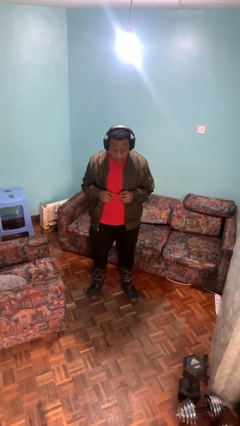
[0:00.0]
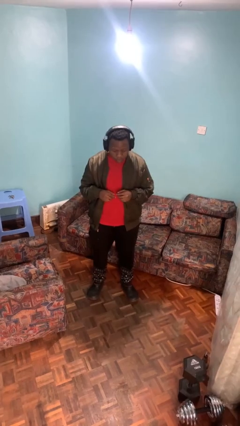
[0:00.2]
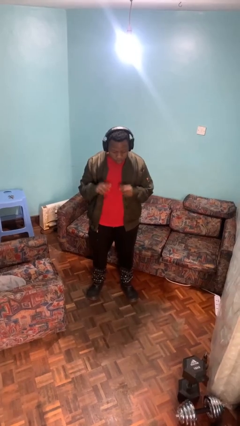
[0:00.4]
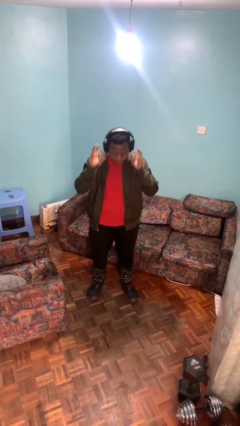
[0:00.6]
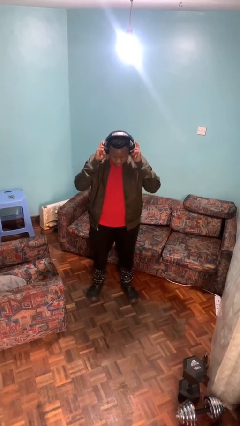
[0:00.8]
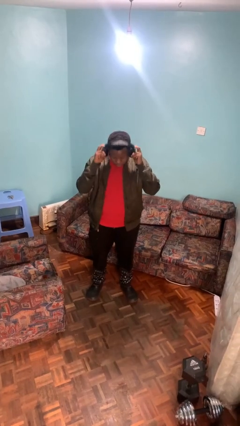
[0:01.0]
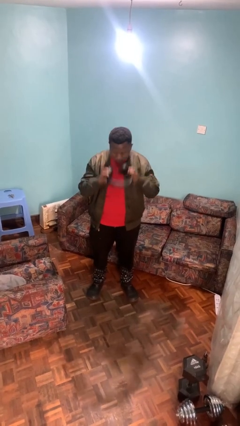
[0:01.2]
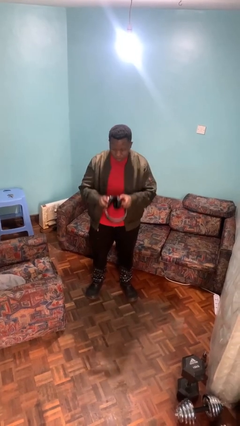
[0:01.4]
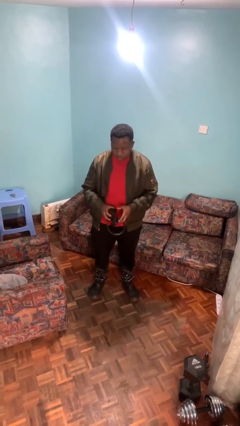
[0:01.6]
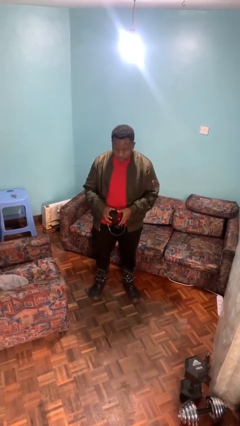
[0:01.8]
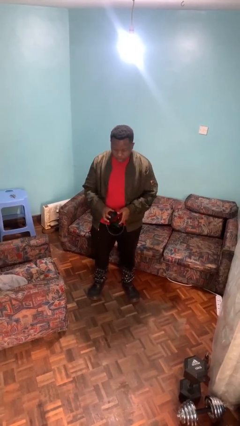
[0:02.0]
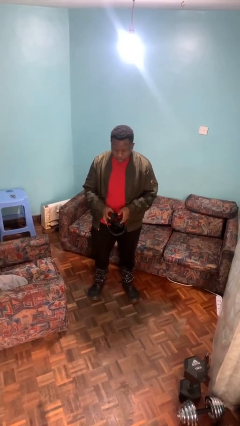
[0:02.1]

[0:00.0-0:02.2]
person takes off headphones

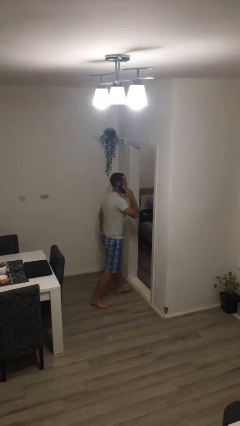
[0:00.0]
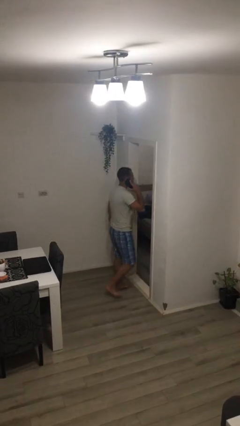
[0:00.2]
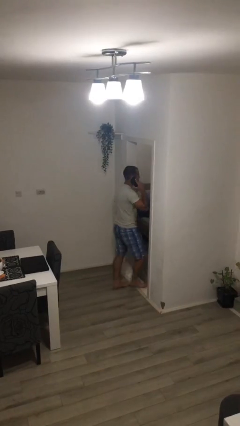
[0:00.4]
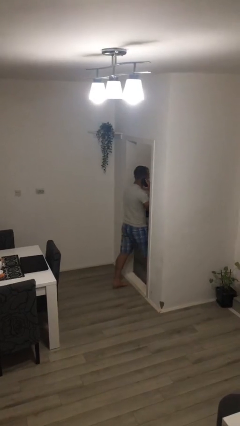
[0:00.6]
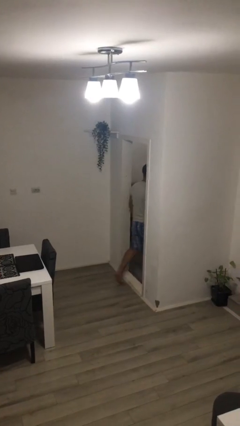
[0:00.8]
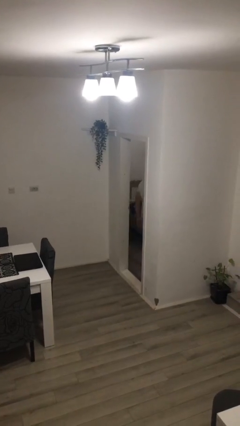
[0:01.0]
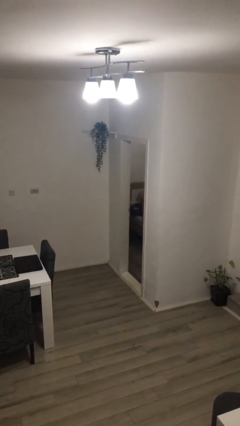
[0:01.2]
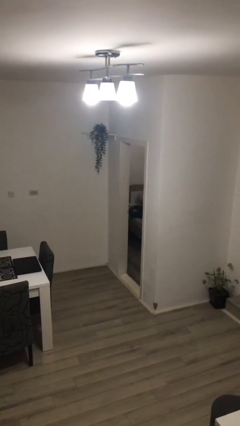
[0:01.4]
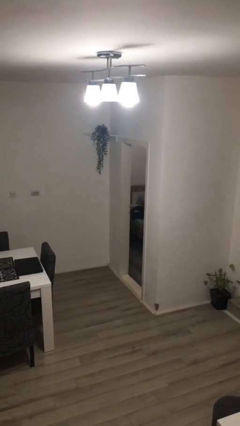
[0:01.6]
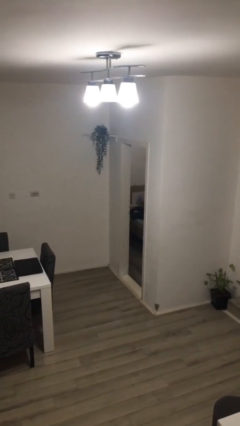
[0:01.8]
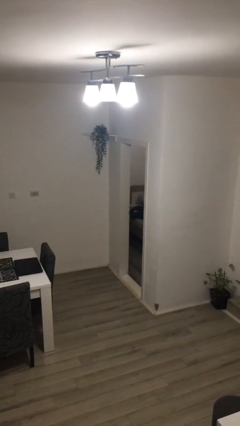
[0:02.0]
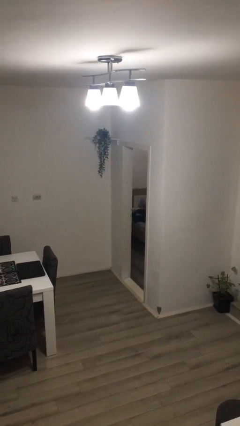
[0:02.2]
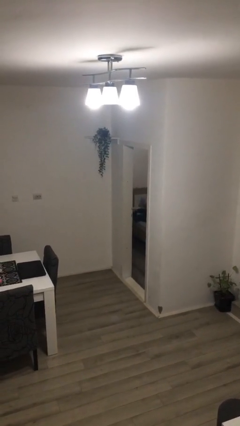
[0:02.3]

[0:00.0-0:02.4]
person exits scene through structure

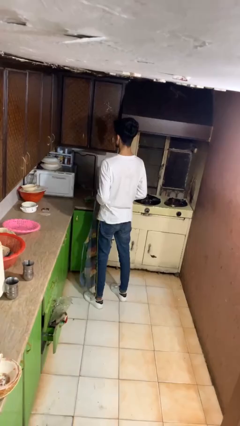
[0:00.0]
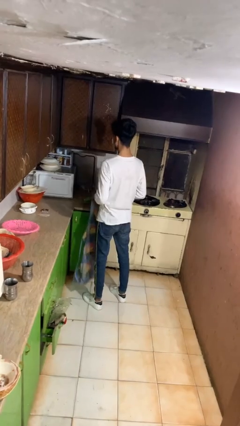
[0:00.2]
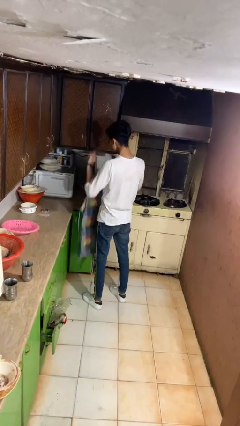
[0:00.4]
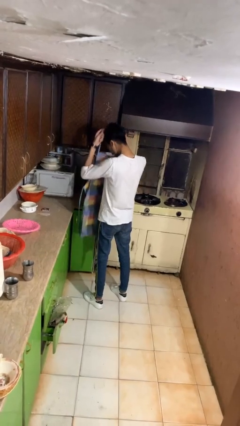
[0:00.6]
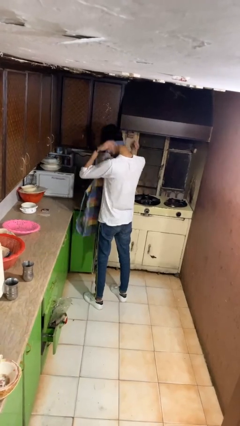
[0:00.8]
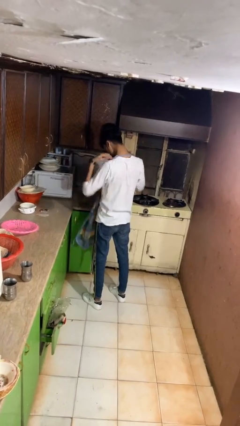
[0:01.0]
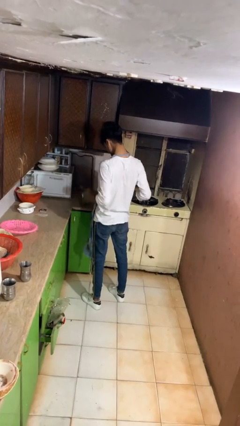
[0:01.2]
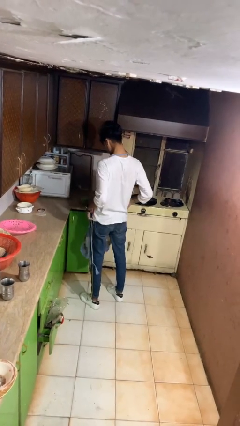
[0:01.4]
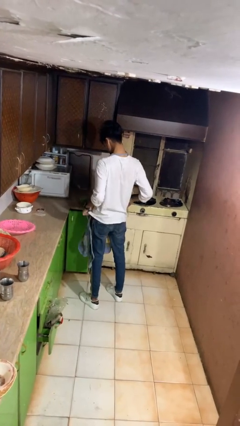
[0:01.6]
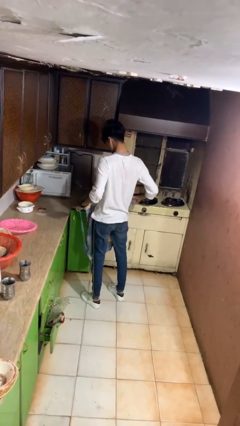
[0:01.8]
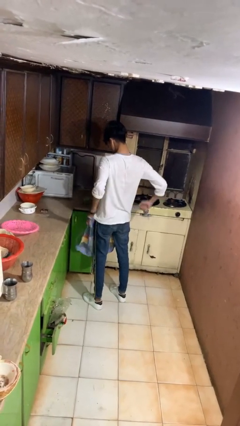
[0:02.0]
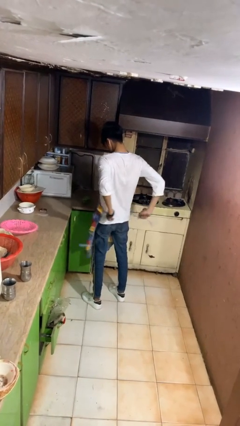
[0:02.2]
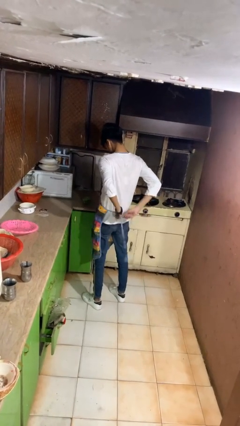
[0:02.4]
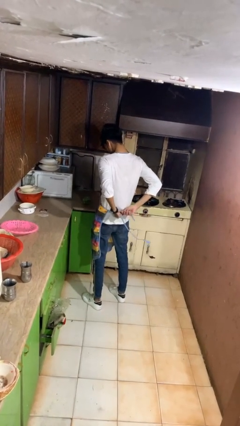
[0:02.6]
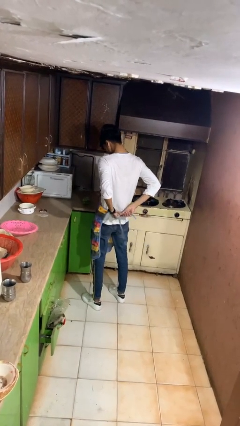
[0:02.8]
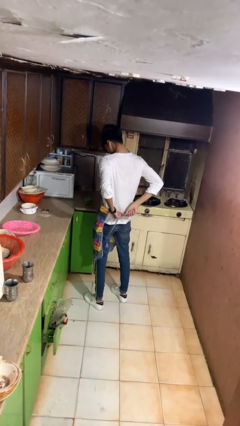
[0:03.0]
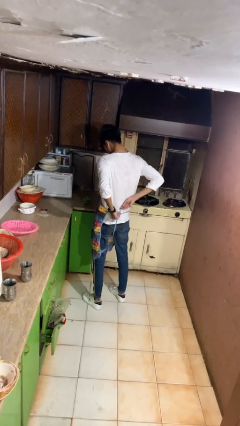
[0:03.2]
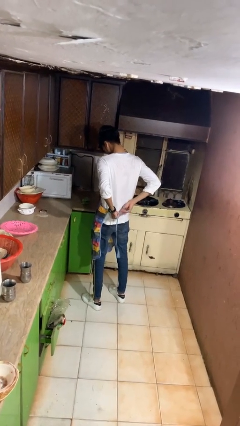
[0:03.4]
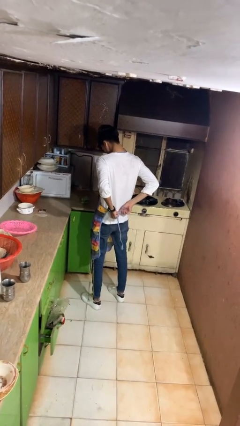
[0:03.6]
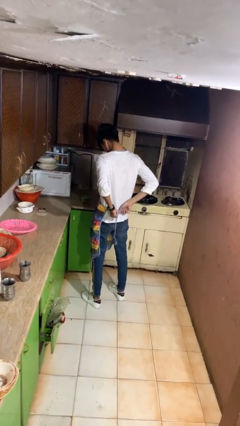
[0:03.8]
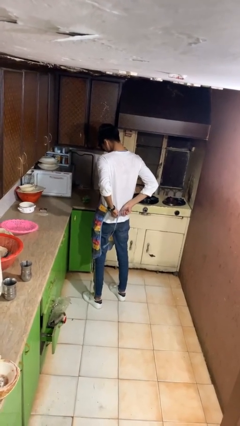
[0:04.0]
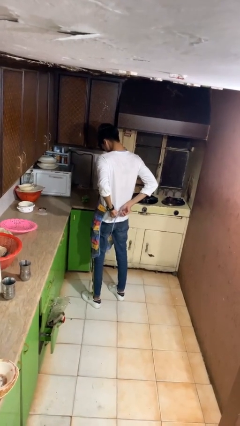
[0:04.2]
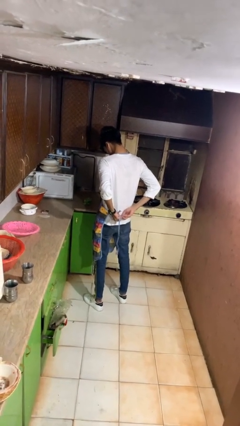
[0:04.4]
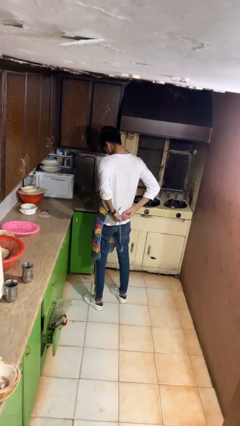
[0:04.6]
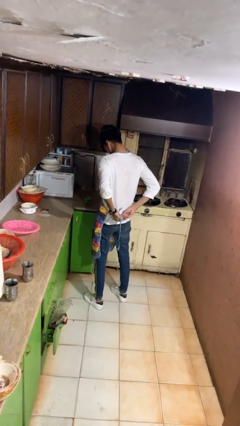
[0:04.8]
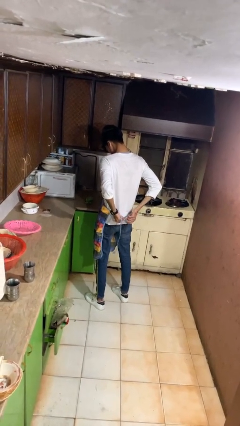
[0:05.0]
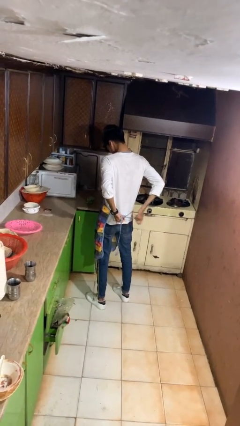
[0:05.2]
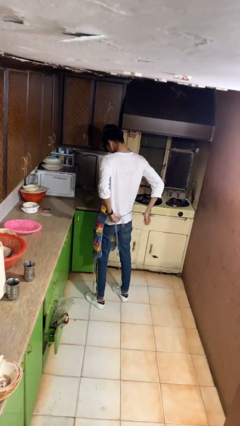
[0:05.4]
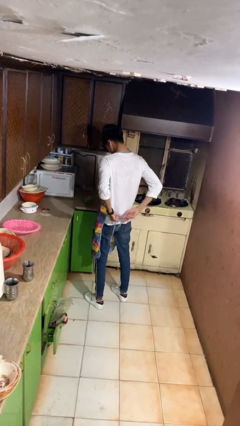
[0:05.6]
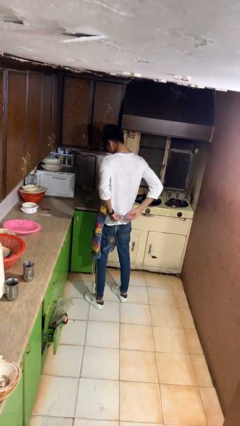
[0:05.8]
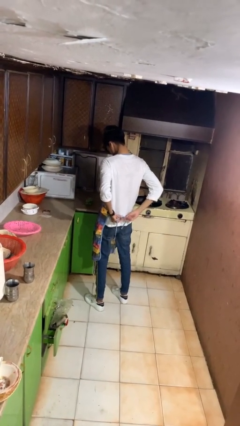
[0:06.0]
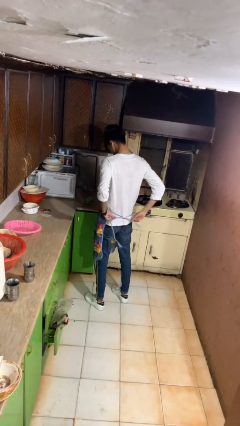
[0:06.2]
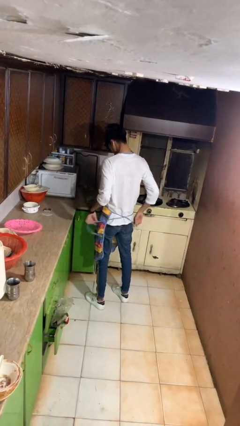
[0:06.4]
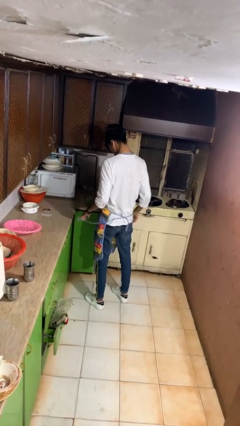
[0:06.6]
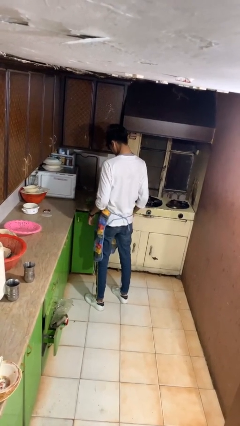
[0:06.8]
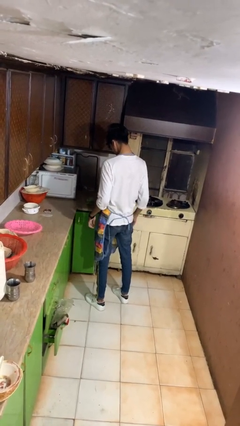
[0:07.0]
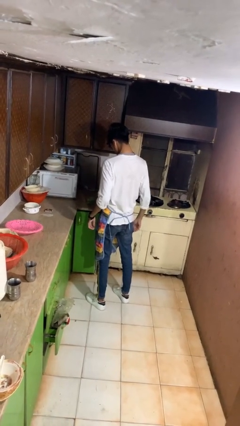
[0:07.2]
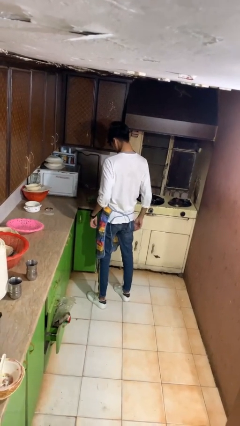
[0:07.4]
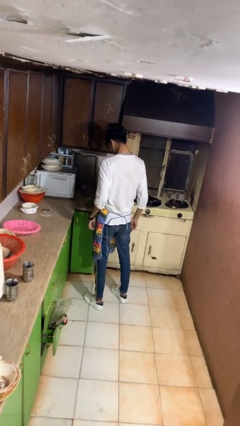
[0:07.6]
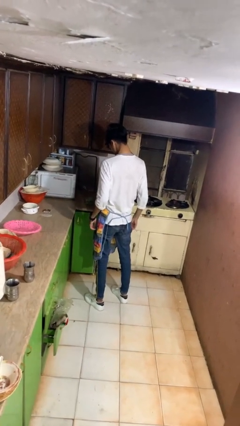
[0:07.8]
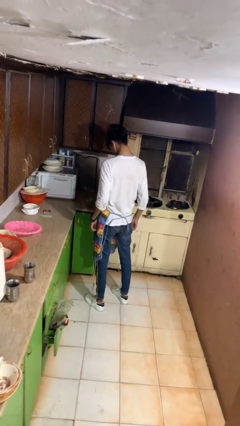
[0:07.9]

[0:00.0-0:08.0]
person puts on apron

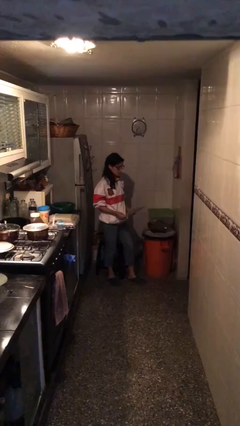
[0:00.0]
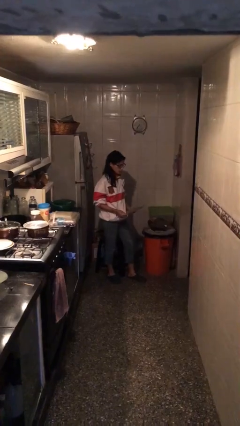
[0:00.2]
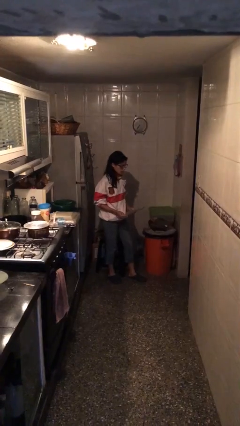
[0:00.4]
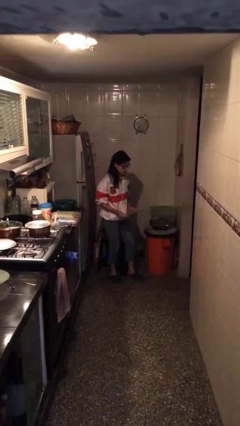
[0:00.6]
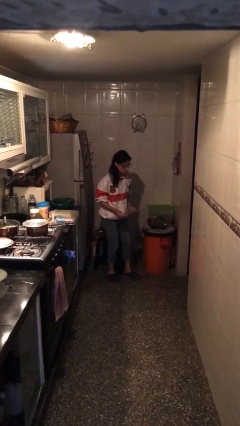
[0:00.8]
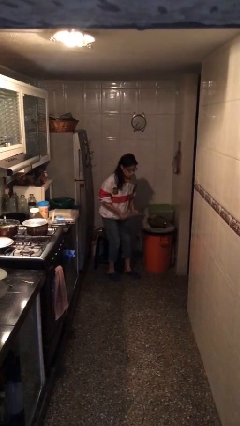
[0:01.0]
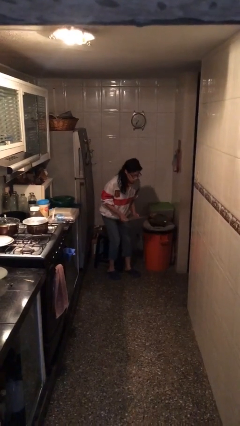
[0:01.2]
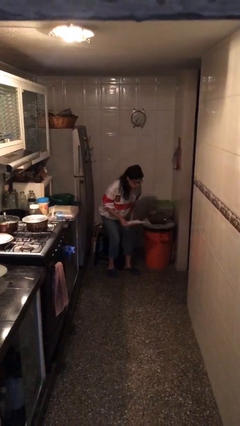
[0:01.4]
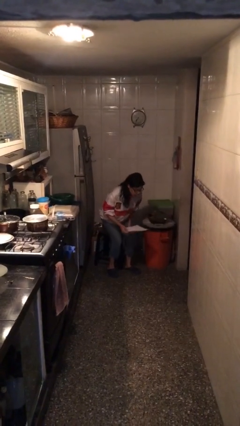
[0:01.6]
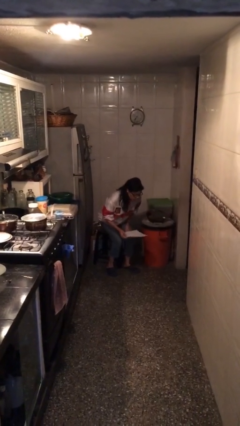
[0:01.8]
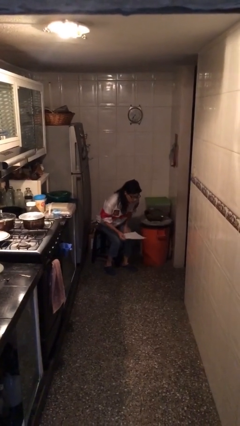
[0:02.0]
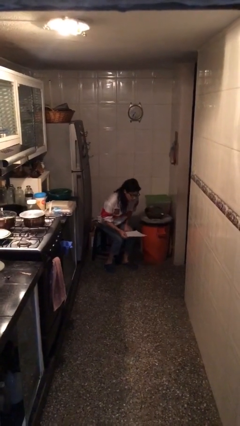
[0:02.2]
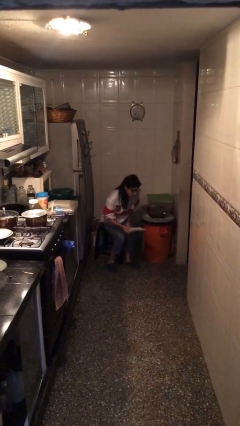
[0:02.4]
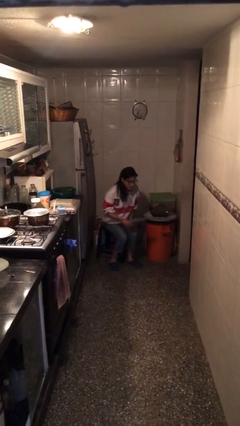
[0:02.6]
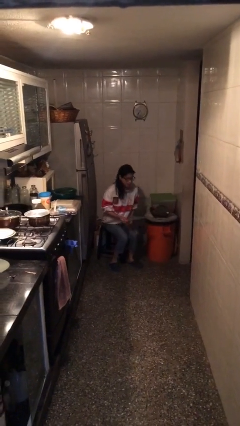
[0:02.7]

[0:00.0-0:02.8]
person sits down

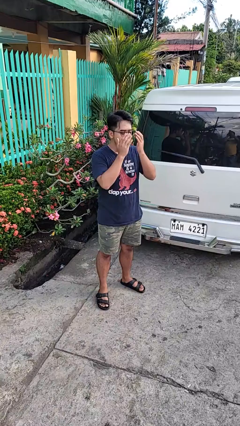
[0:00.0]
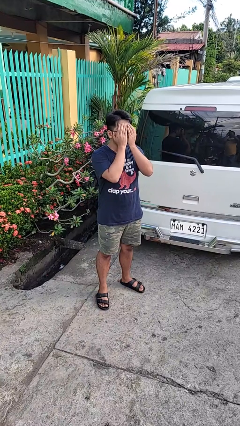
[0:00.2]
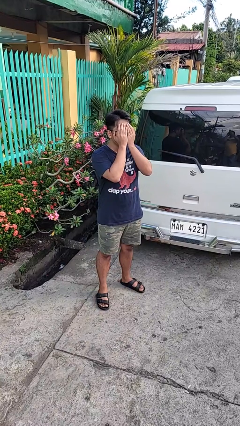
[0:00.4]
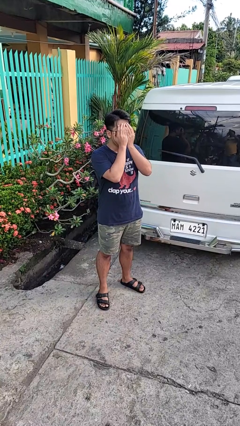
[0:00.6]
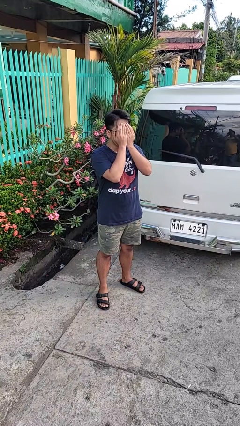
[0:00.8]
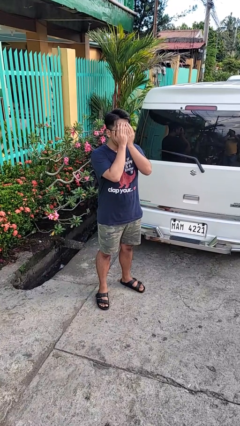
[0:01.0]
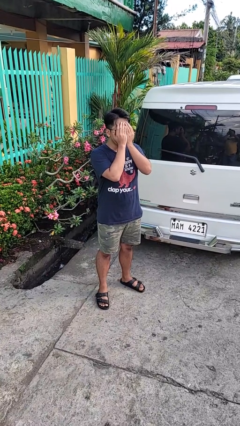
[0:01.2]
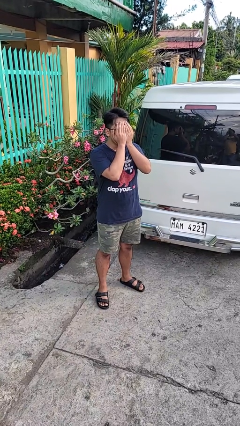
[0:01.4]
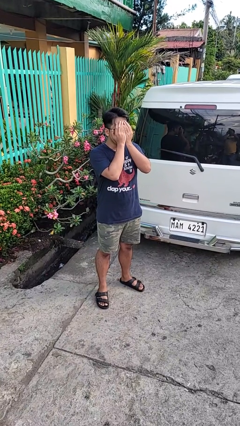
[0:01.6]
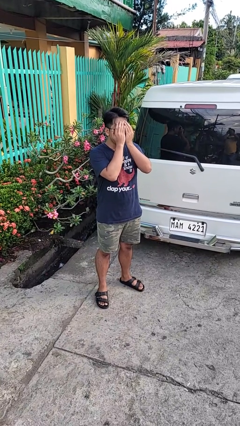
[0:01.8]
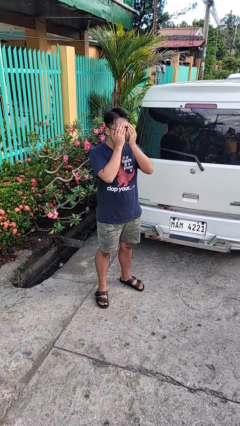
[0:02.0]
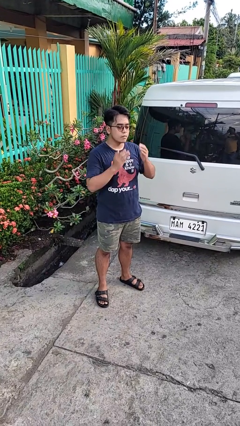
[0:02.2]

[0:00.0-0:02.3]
person covers face with hands
